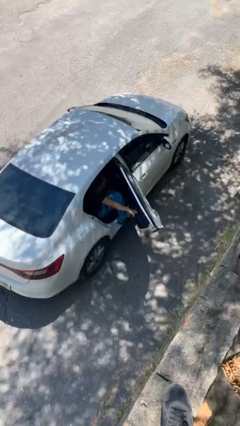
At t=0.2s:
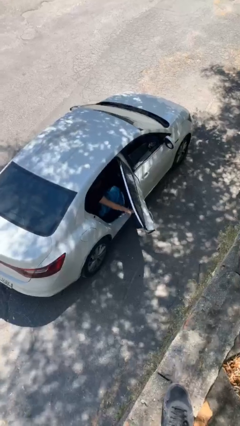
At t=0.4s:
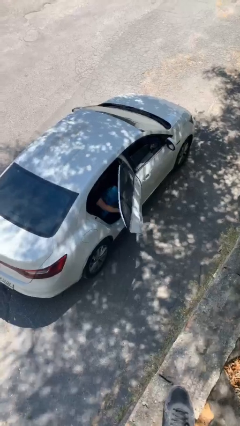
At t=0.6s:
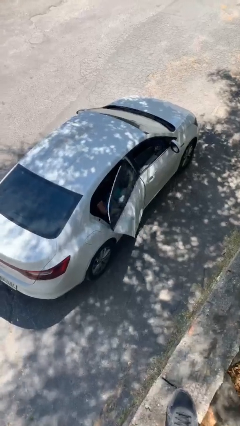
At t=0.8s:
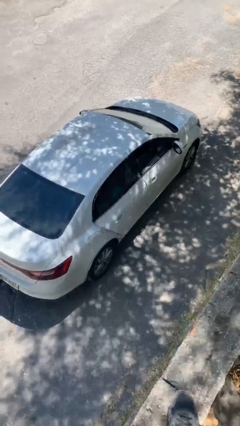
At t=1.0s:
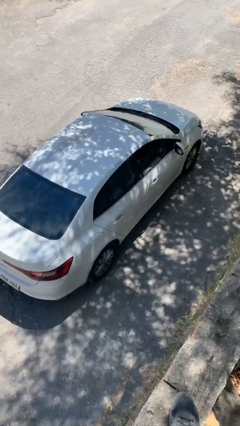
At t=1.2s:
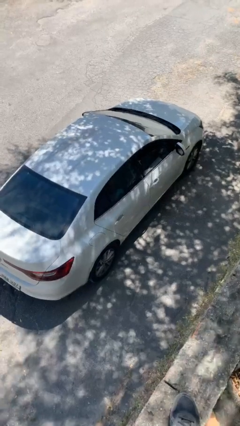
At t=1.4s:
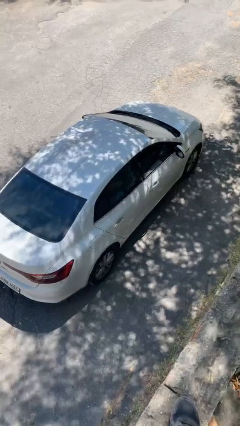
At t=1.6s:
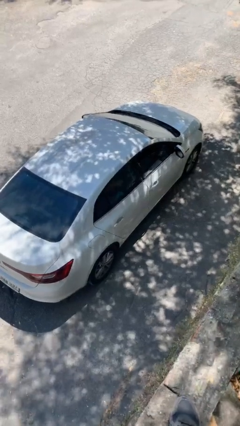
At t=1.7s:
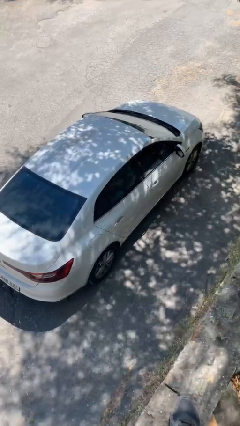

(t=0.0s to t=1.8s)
person closes car door

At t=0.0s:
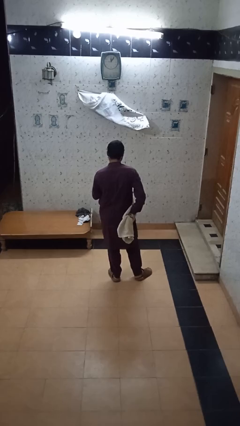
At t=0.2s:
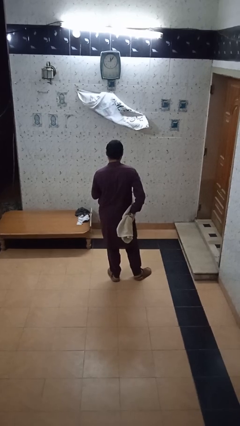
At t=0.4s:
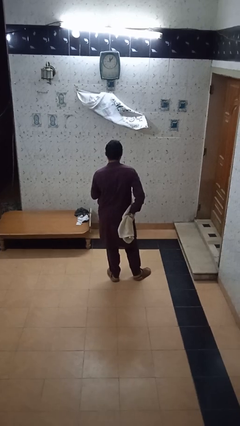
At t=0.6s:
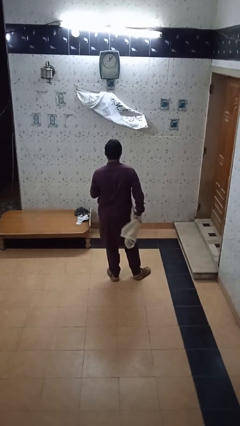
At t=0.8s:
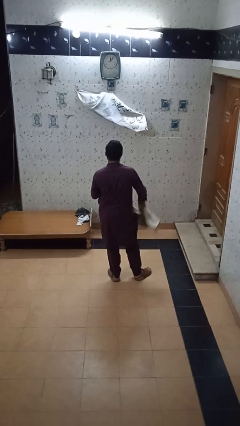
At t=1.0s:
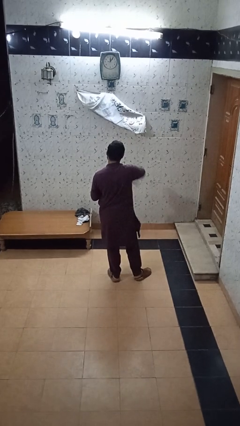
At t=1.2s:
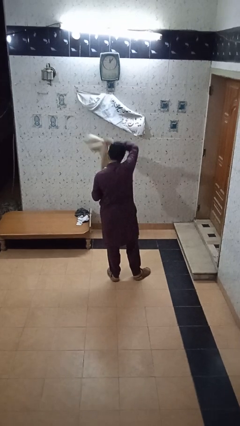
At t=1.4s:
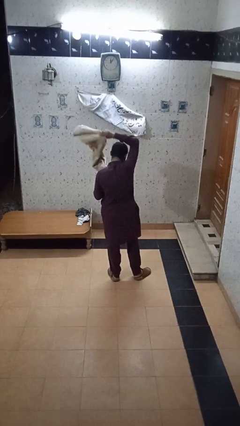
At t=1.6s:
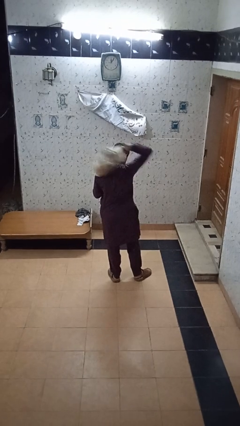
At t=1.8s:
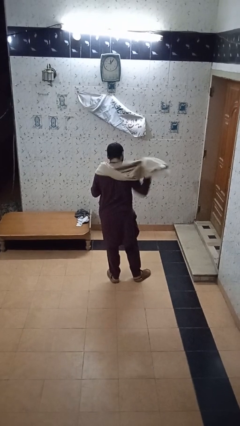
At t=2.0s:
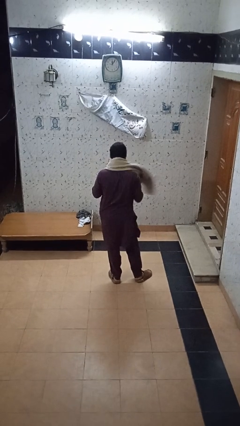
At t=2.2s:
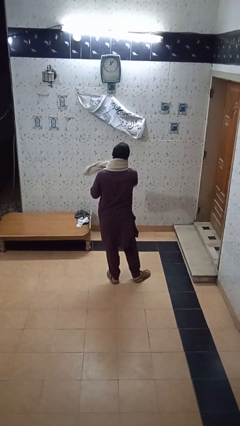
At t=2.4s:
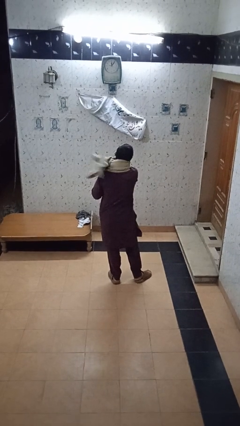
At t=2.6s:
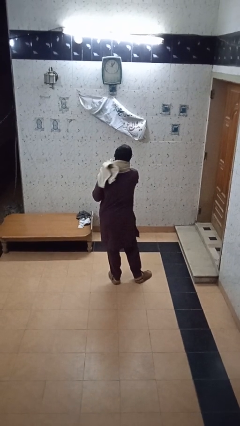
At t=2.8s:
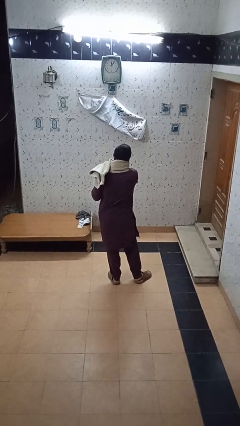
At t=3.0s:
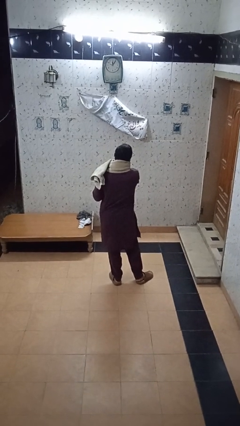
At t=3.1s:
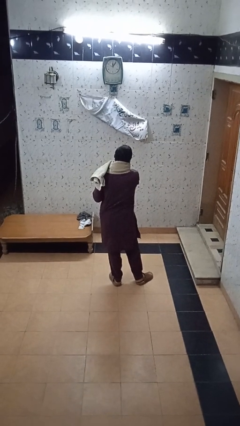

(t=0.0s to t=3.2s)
person puts on scarf

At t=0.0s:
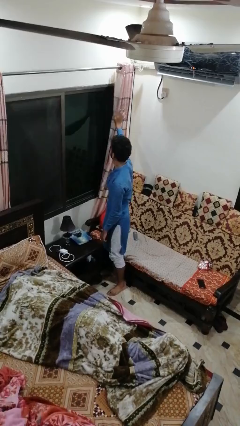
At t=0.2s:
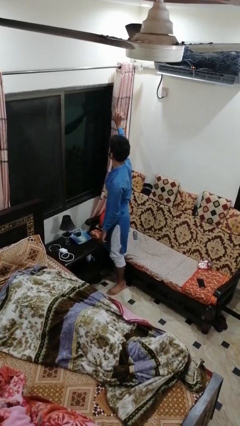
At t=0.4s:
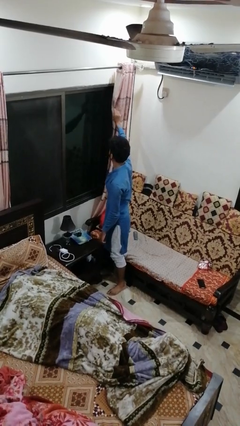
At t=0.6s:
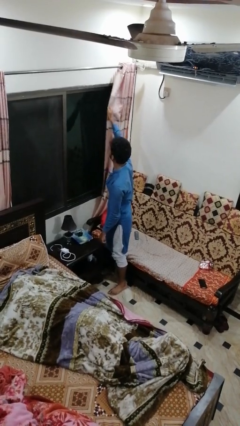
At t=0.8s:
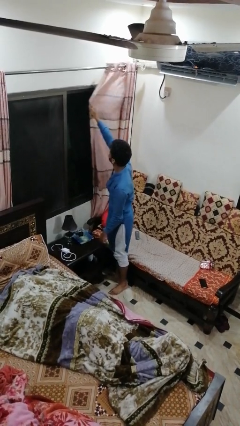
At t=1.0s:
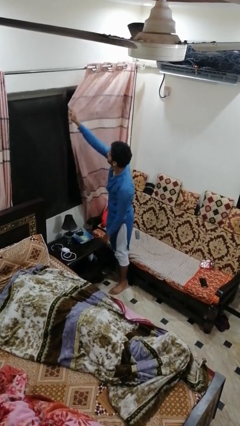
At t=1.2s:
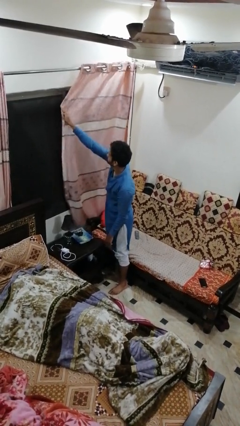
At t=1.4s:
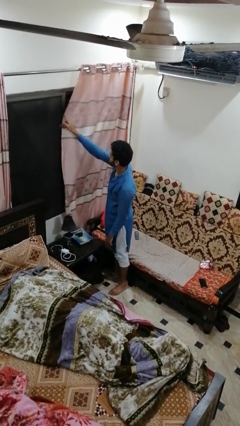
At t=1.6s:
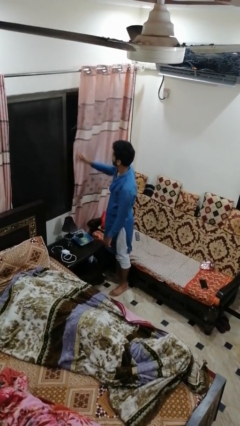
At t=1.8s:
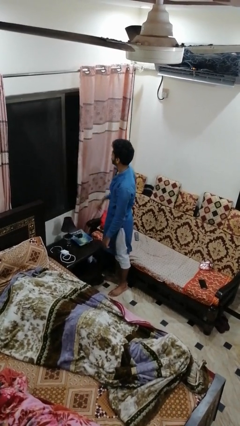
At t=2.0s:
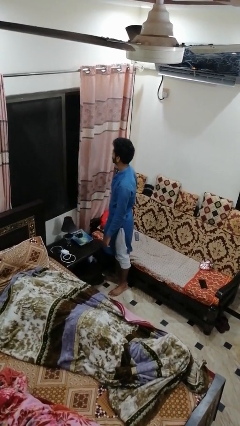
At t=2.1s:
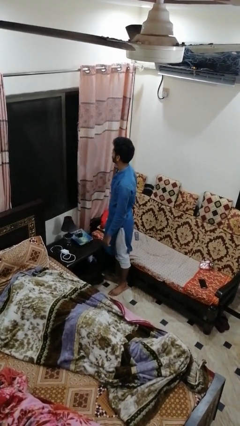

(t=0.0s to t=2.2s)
person closes curtains

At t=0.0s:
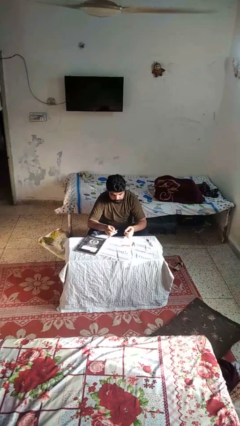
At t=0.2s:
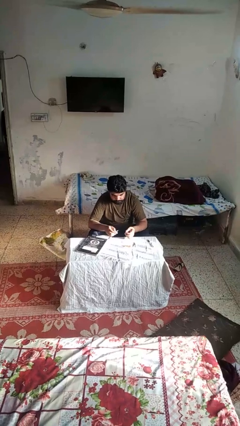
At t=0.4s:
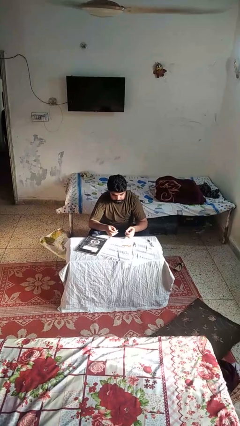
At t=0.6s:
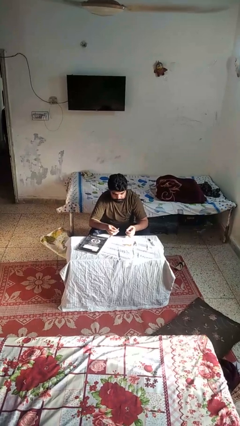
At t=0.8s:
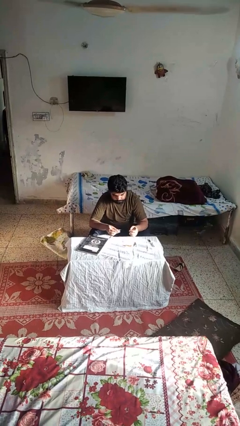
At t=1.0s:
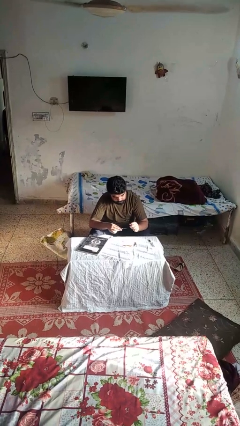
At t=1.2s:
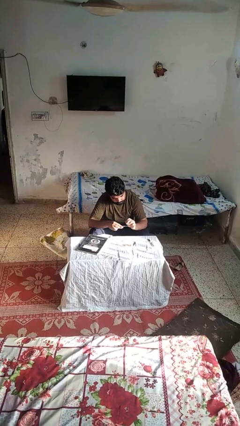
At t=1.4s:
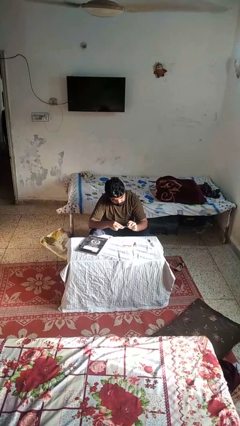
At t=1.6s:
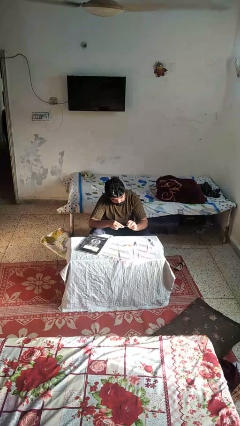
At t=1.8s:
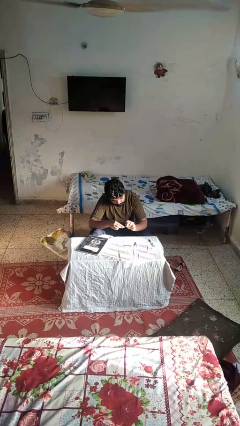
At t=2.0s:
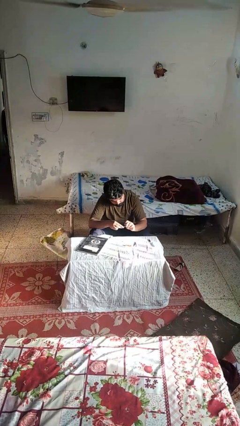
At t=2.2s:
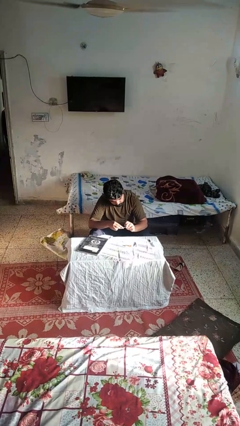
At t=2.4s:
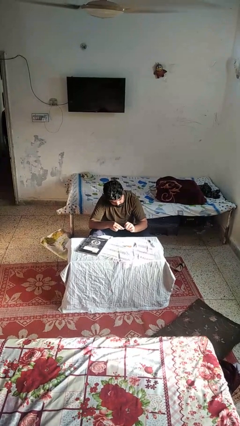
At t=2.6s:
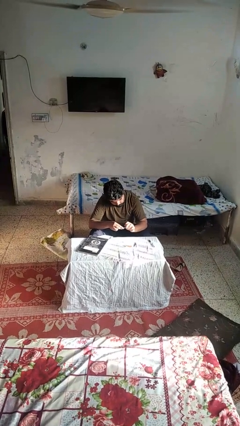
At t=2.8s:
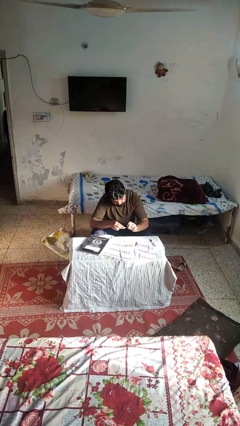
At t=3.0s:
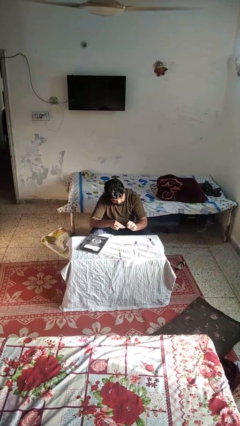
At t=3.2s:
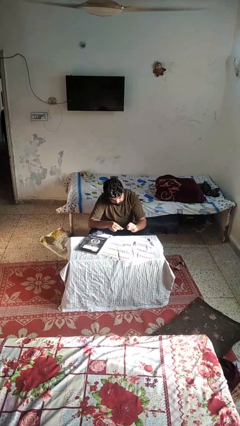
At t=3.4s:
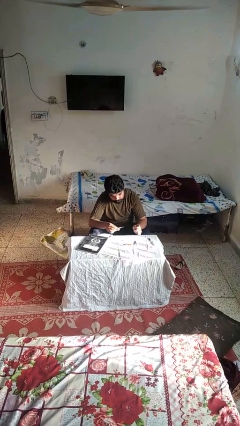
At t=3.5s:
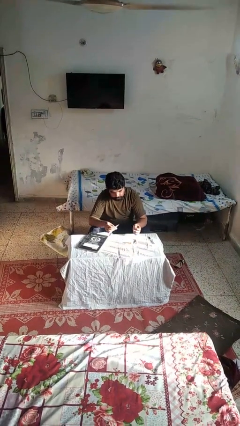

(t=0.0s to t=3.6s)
person files fingernails

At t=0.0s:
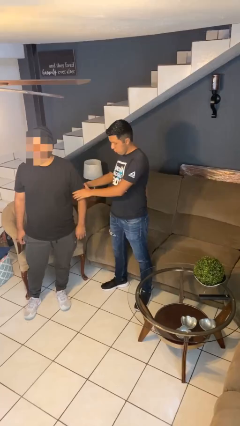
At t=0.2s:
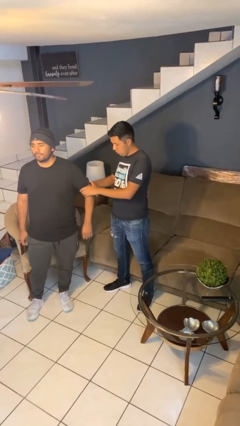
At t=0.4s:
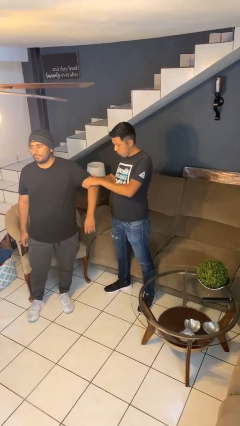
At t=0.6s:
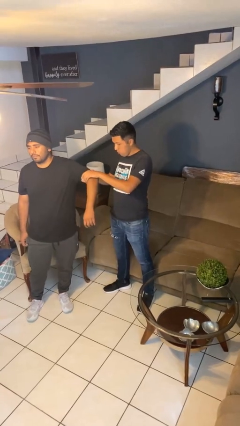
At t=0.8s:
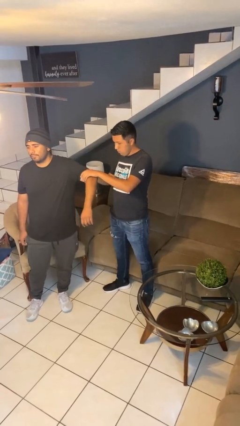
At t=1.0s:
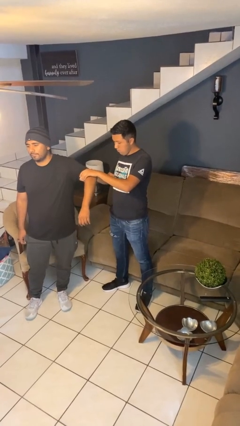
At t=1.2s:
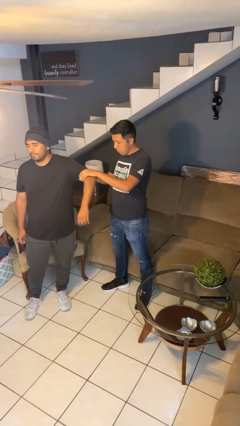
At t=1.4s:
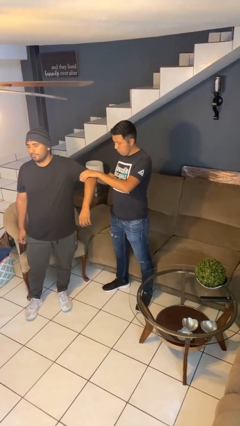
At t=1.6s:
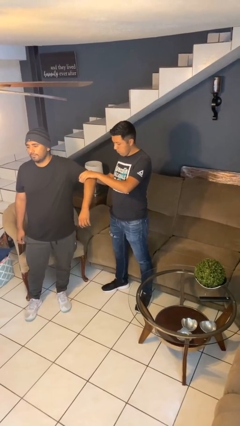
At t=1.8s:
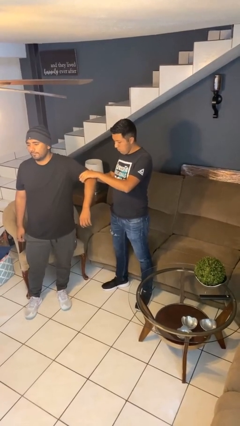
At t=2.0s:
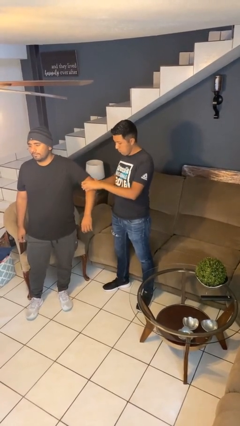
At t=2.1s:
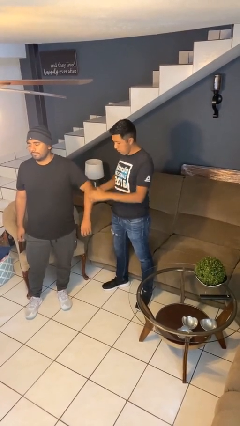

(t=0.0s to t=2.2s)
person grabs person by bicep

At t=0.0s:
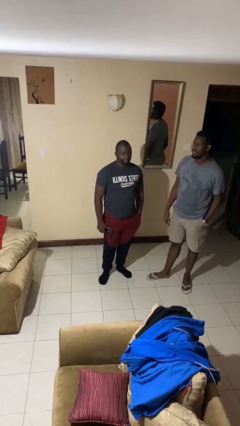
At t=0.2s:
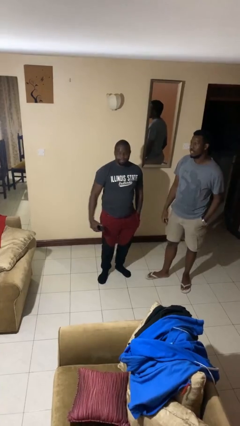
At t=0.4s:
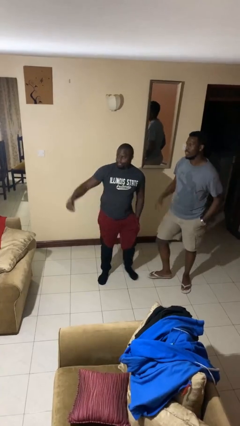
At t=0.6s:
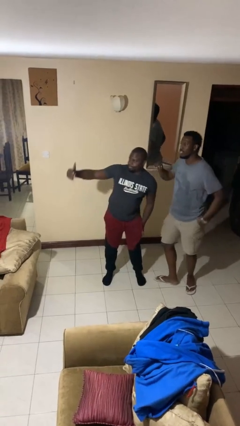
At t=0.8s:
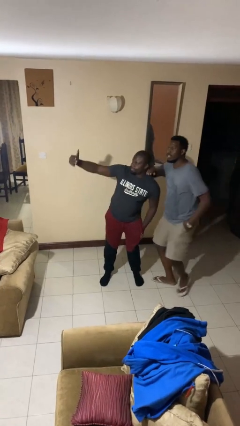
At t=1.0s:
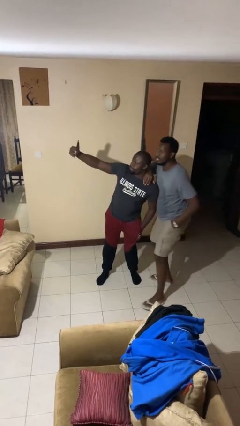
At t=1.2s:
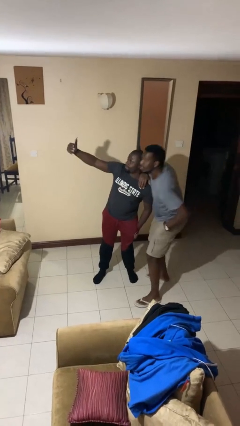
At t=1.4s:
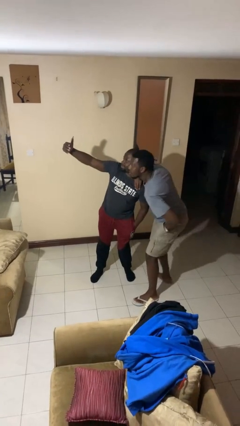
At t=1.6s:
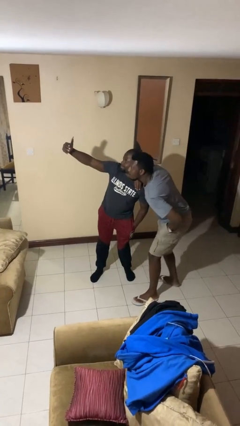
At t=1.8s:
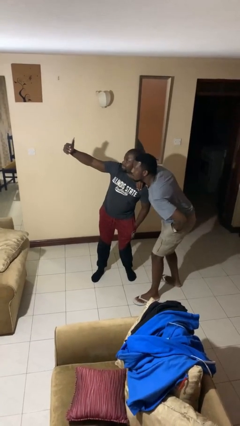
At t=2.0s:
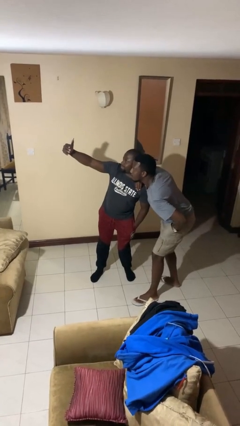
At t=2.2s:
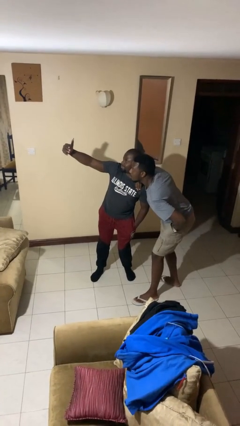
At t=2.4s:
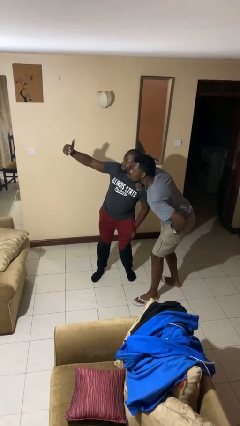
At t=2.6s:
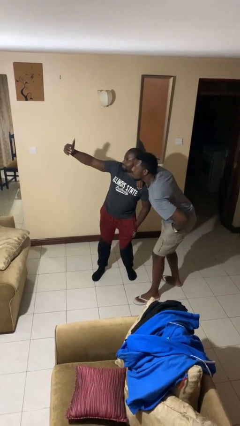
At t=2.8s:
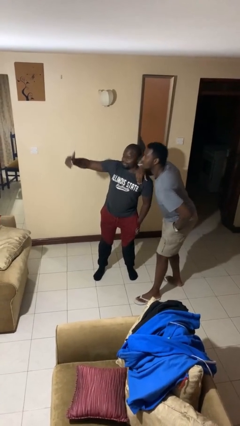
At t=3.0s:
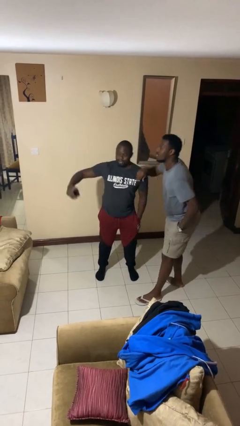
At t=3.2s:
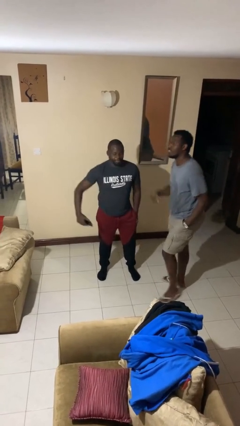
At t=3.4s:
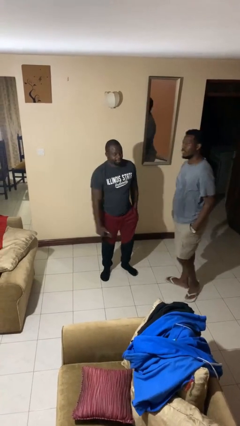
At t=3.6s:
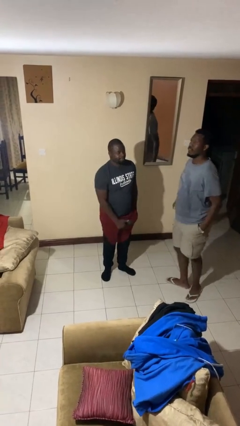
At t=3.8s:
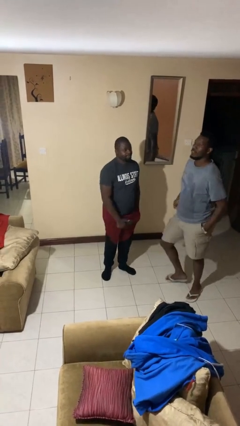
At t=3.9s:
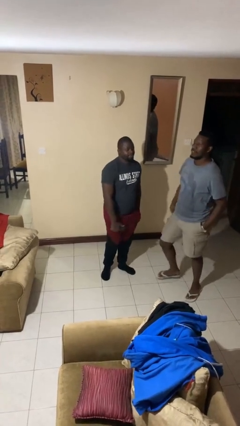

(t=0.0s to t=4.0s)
person takes selfie with person
